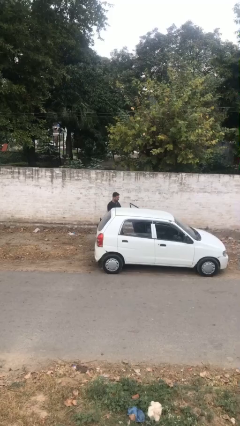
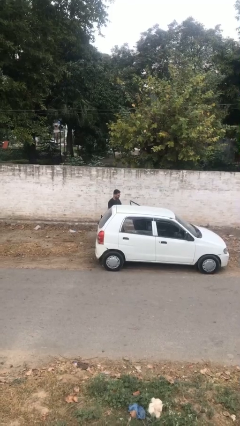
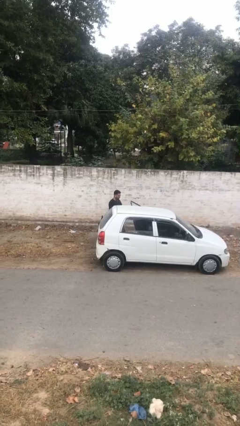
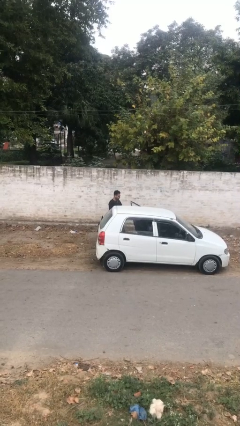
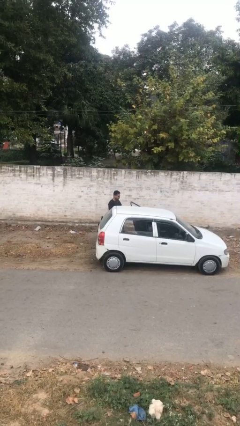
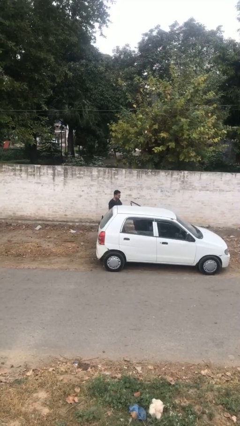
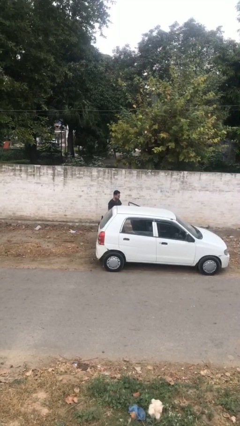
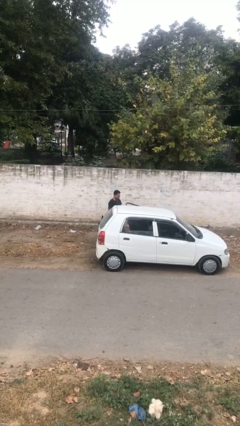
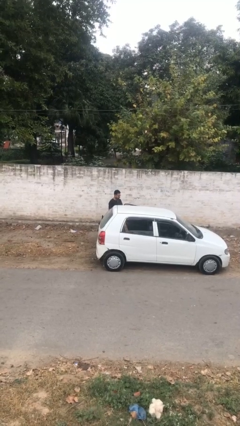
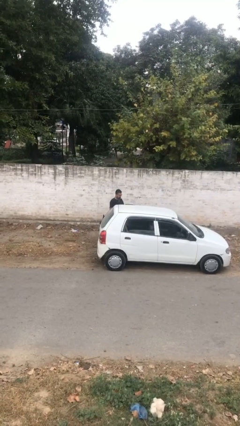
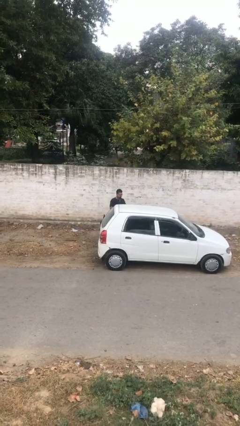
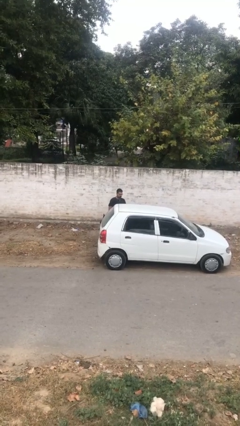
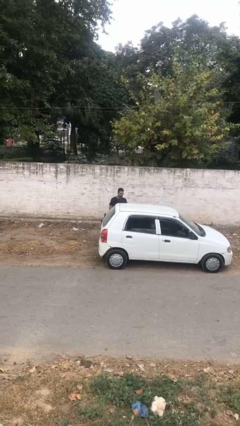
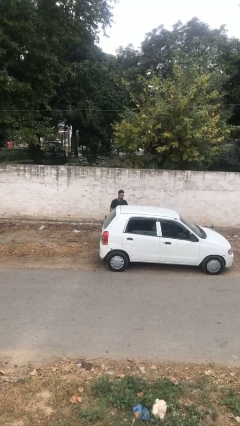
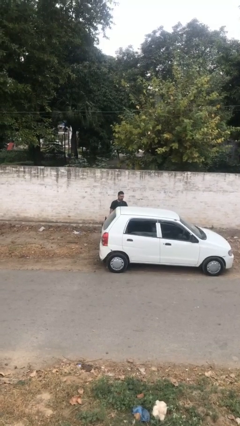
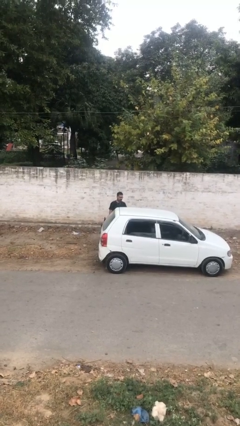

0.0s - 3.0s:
person closes car door

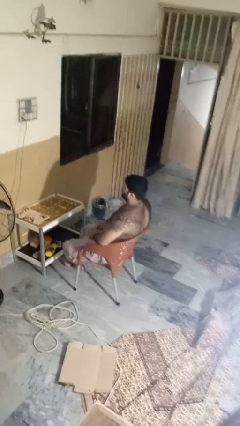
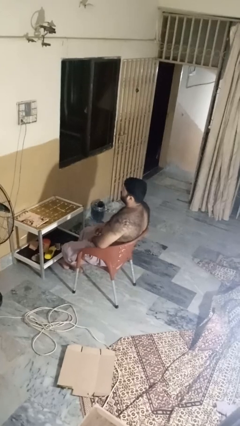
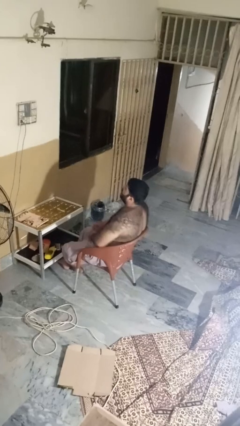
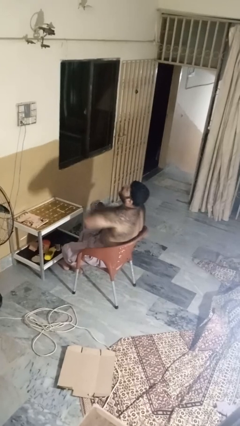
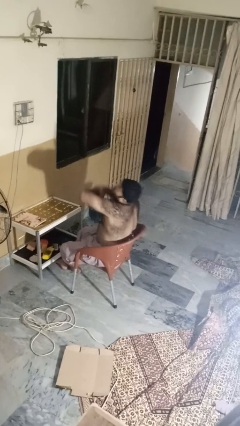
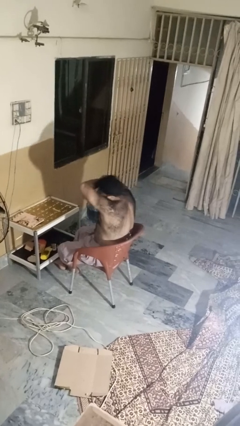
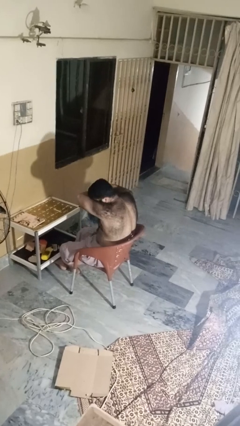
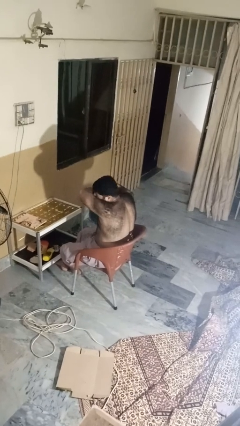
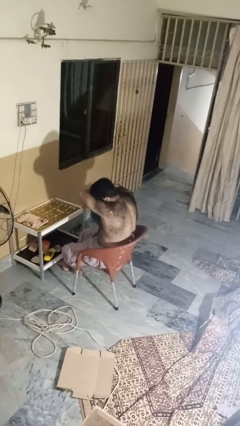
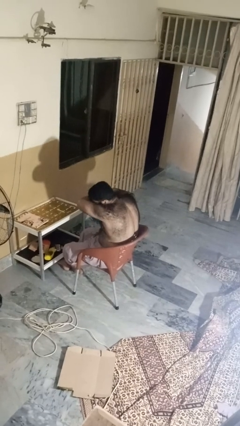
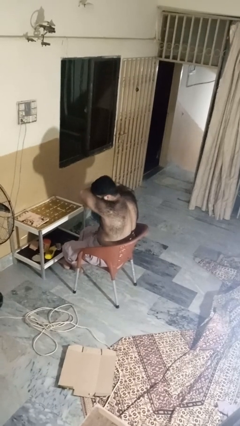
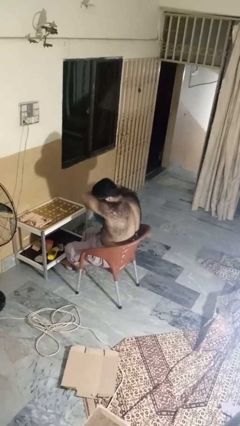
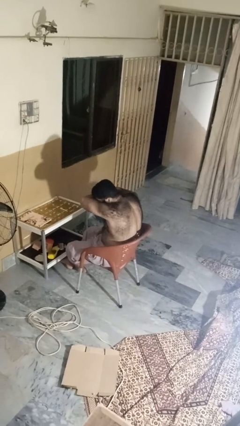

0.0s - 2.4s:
person sneezes into arm

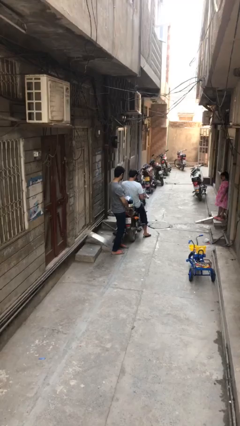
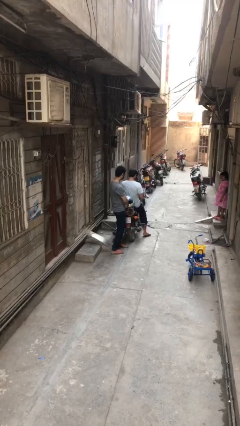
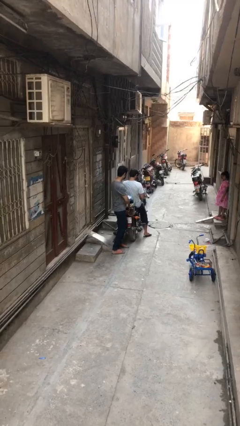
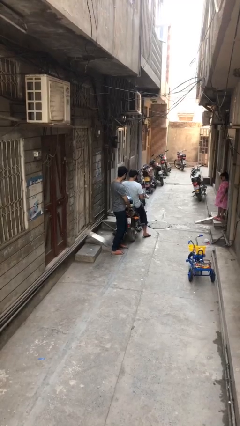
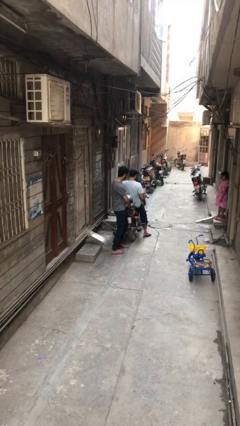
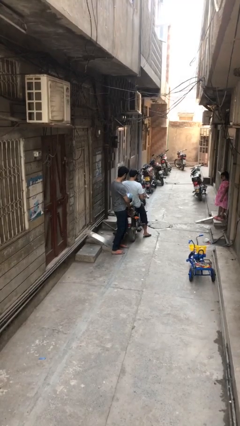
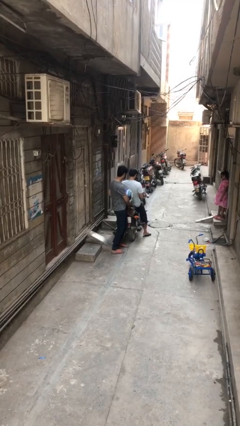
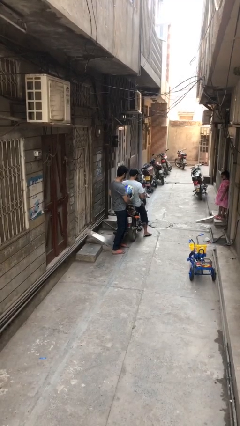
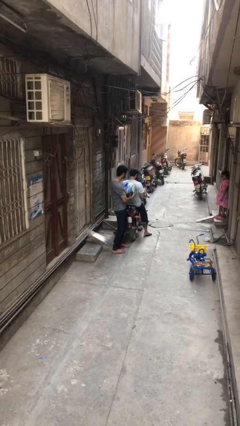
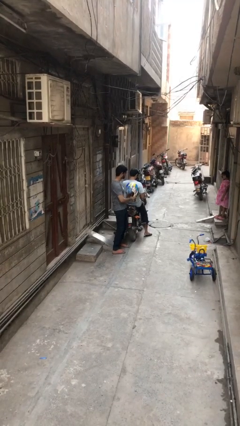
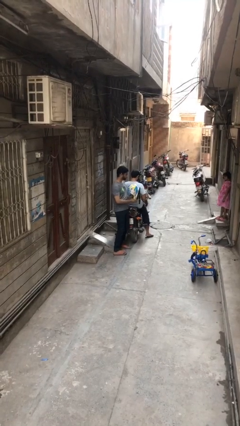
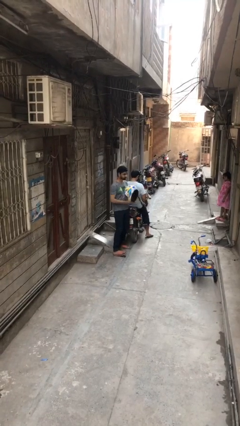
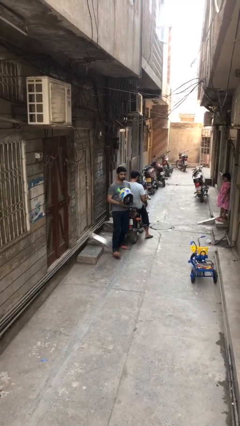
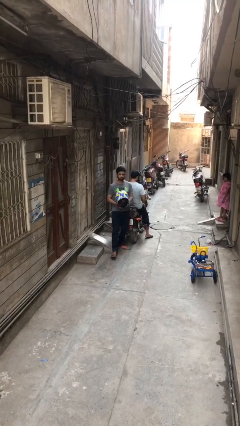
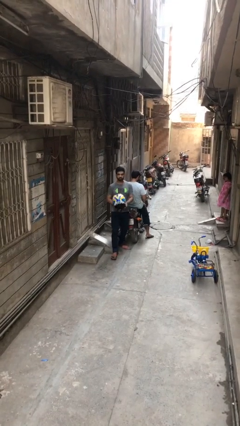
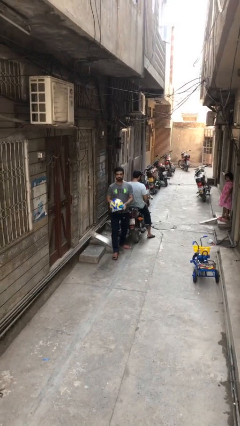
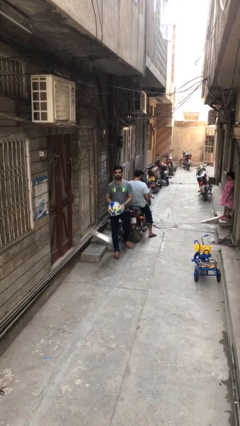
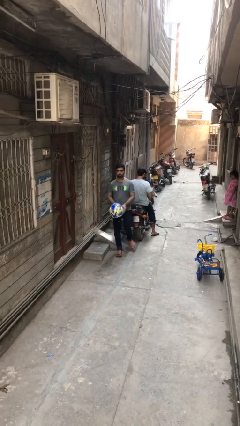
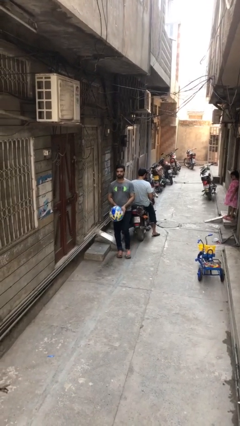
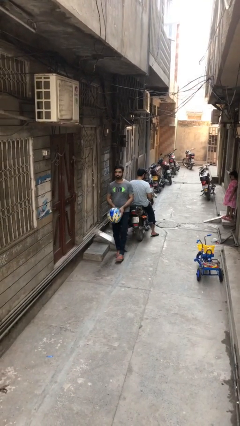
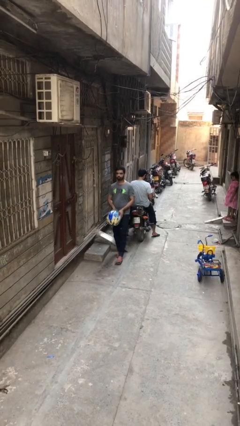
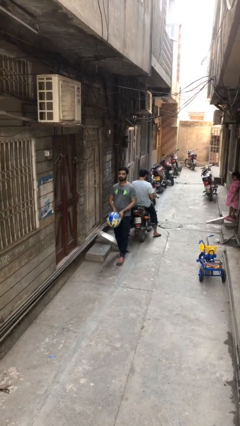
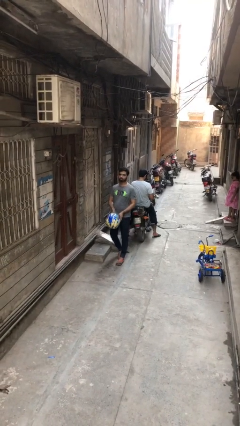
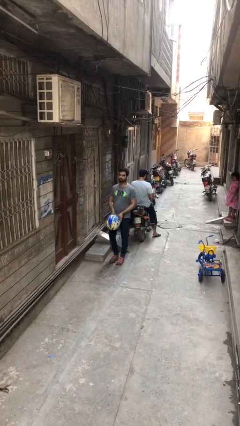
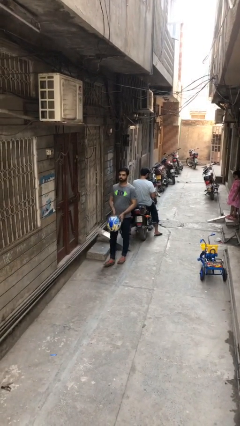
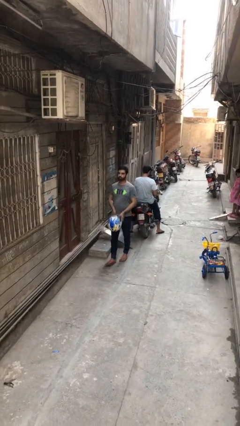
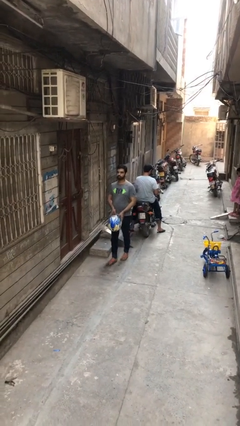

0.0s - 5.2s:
person steals object from person

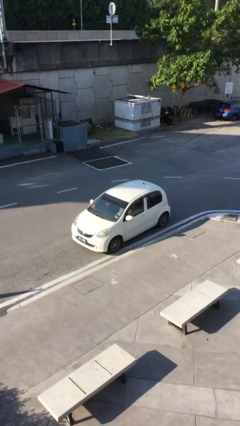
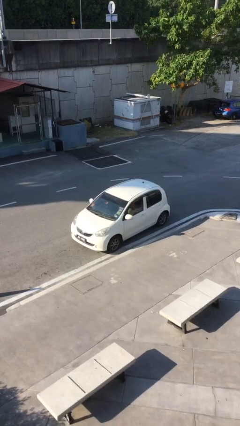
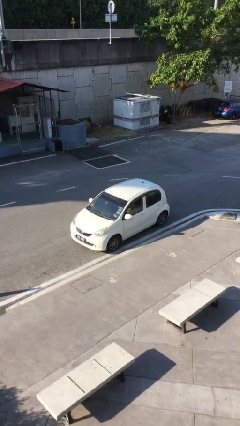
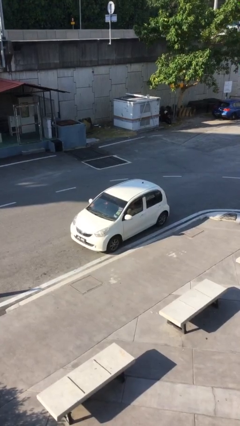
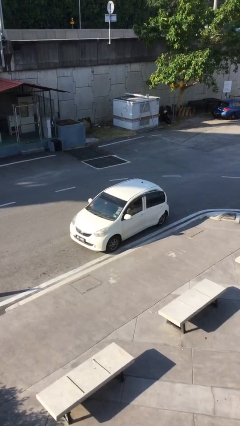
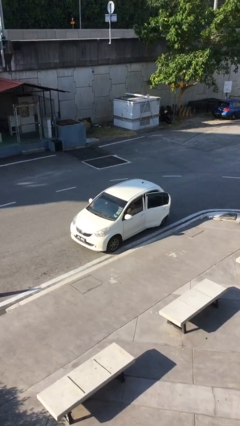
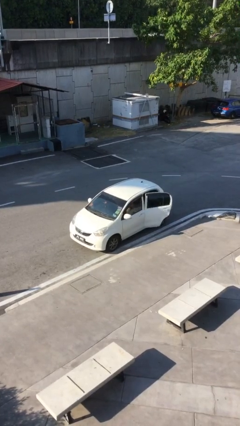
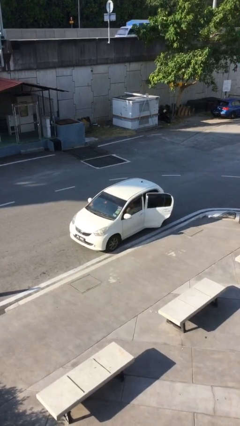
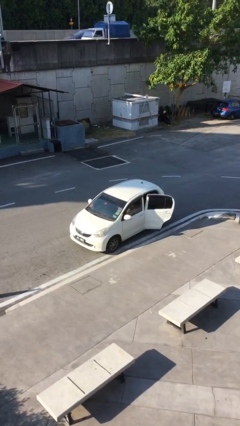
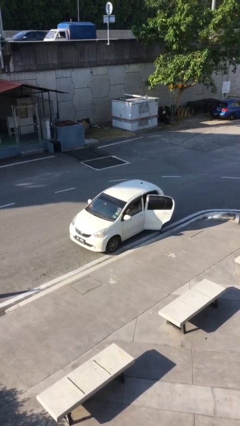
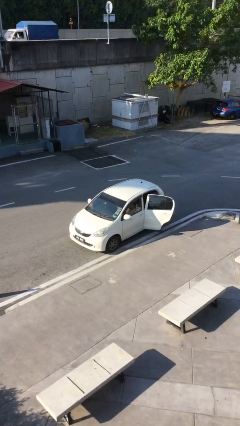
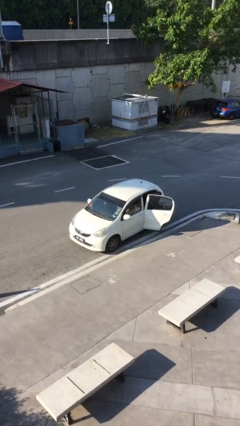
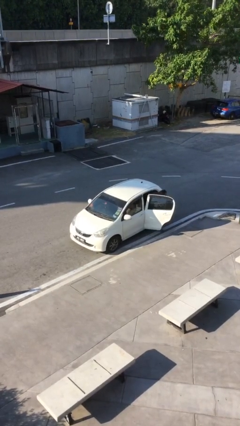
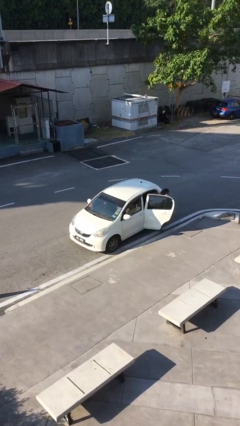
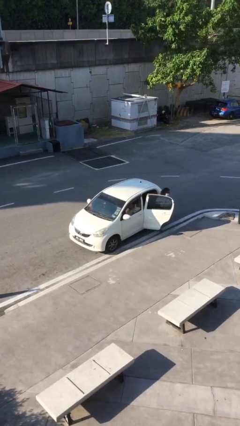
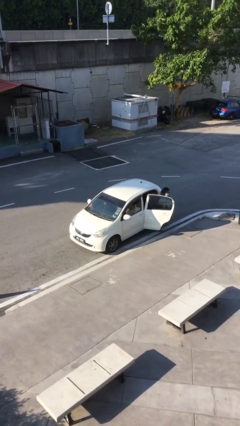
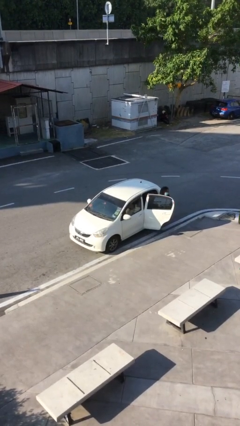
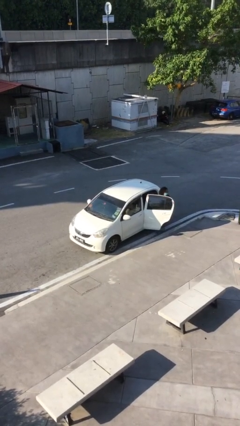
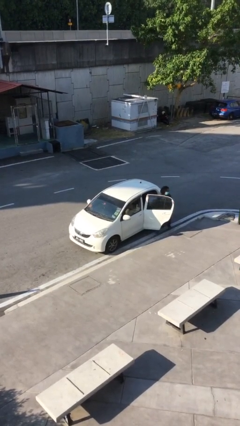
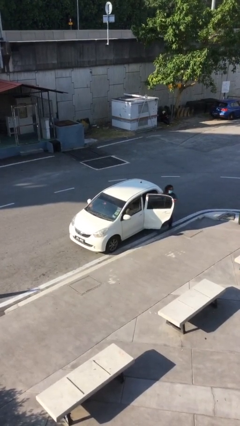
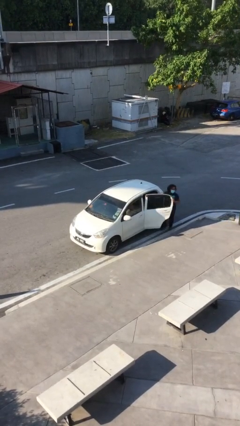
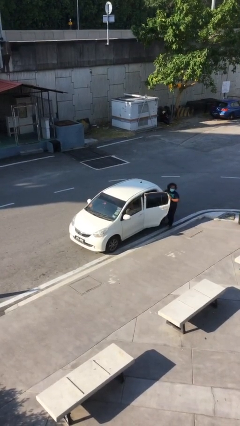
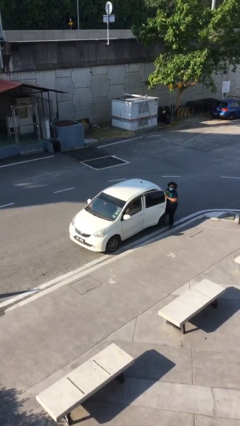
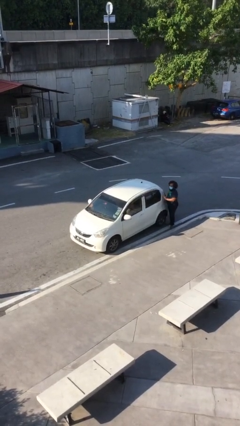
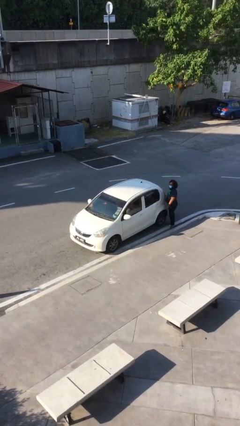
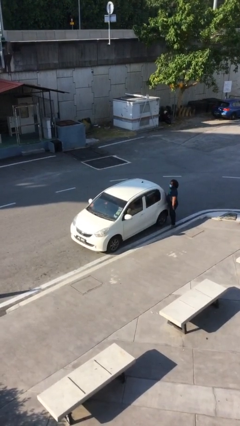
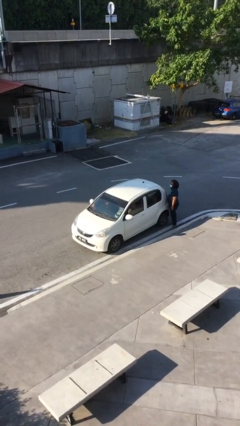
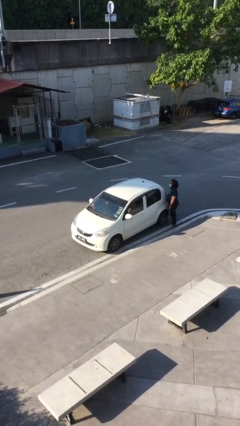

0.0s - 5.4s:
car drops off person

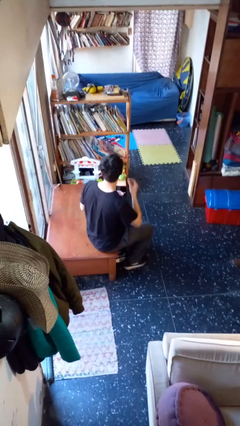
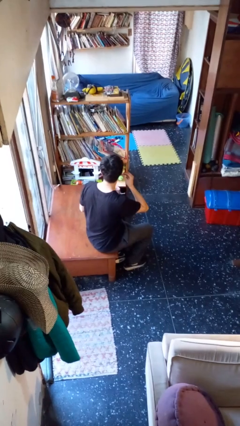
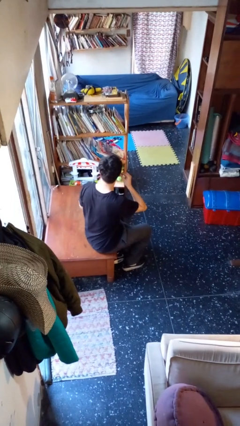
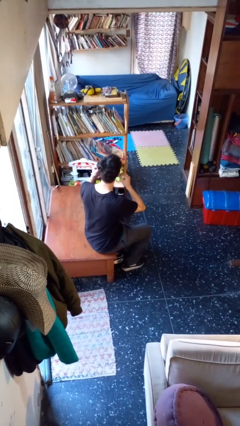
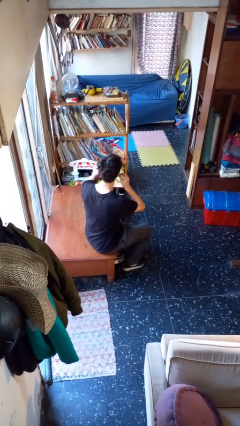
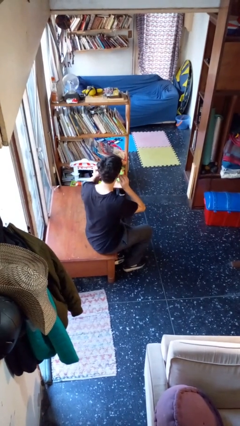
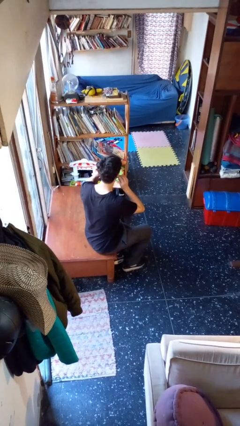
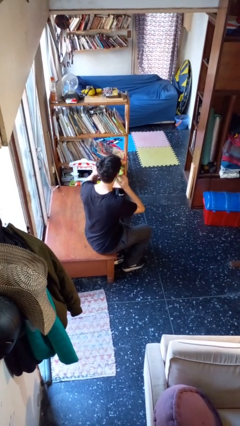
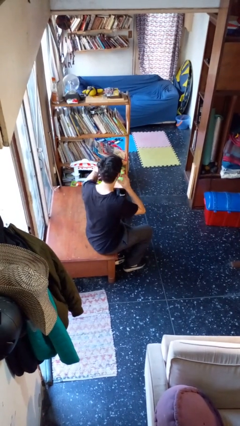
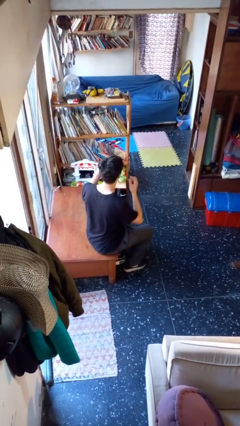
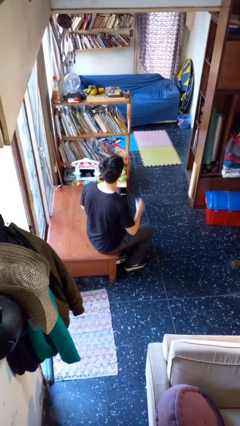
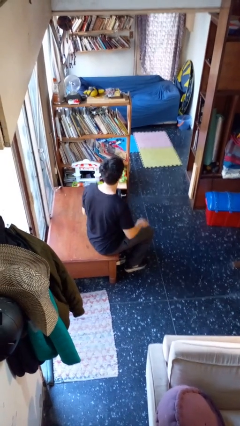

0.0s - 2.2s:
person puts on headphones
